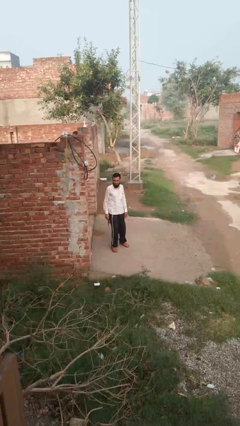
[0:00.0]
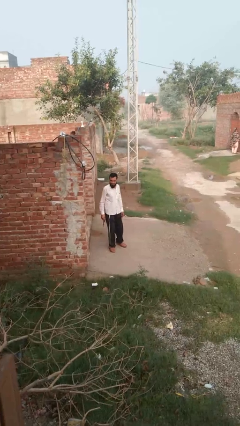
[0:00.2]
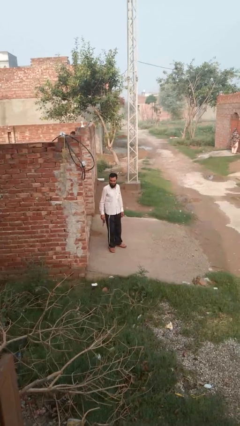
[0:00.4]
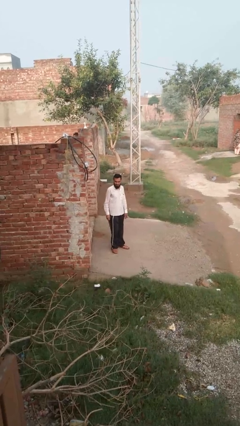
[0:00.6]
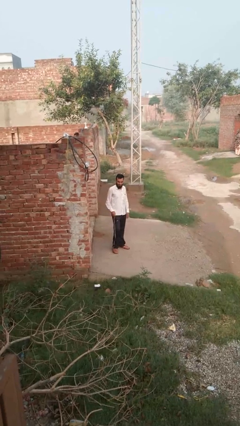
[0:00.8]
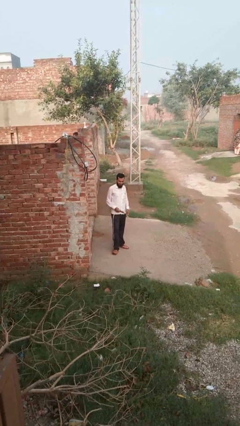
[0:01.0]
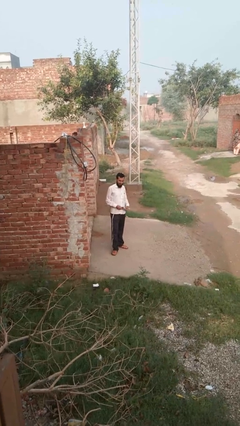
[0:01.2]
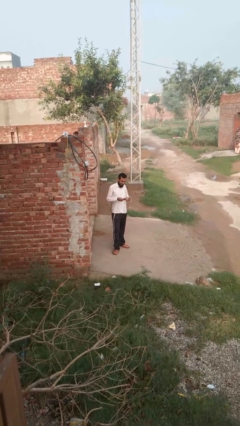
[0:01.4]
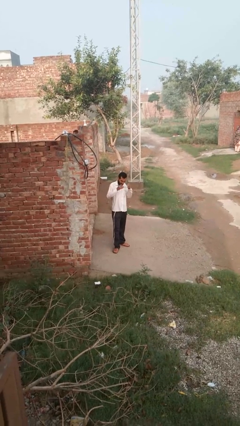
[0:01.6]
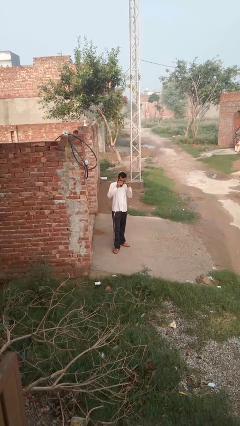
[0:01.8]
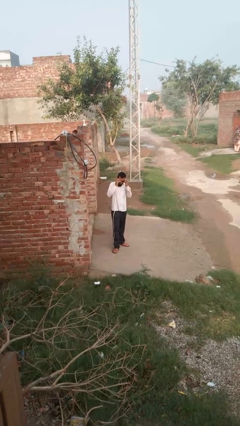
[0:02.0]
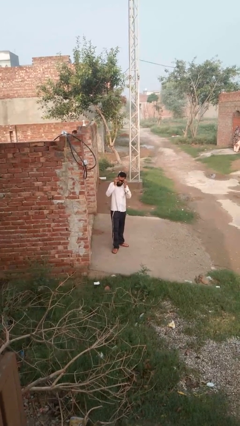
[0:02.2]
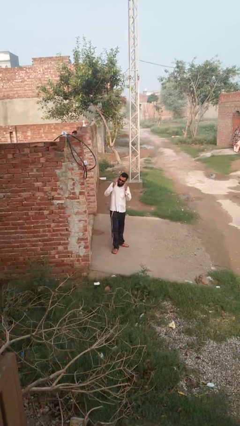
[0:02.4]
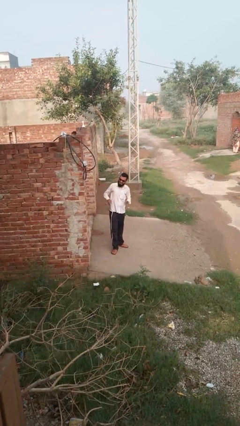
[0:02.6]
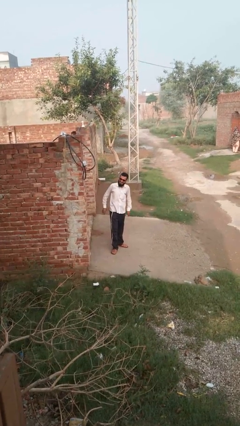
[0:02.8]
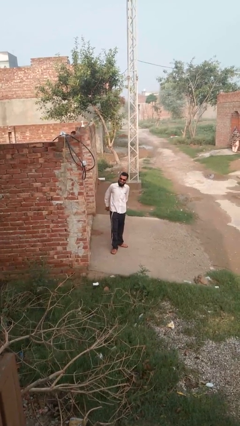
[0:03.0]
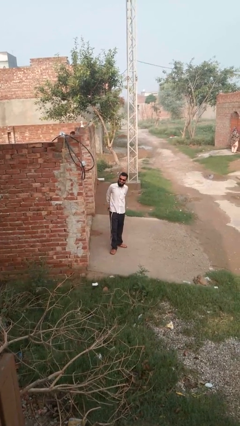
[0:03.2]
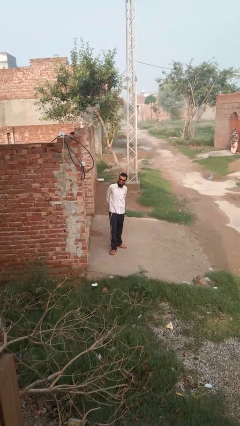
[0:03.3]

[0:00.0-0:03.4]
person puts on glasses

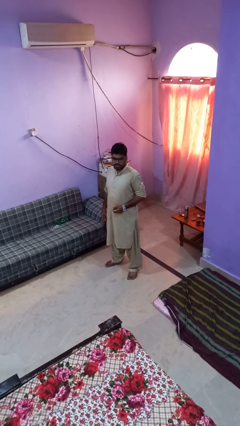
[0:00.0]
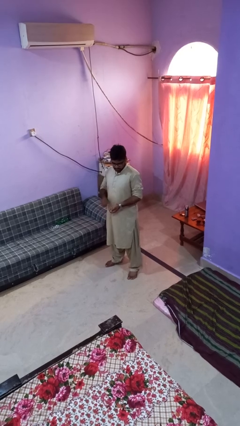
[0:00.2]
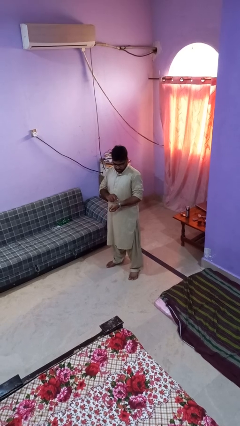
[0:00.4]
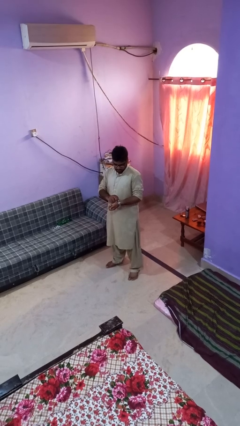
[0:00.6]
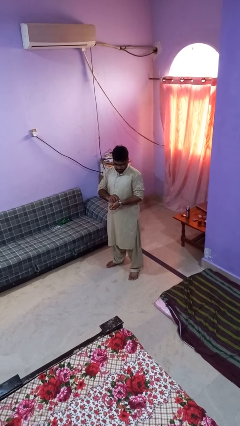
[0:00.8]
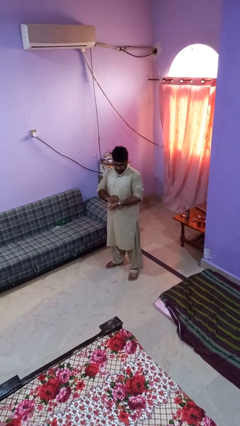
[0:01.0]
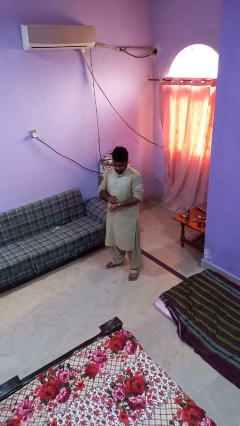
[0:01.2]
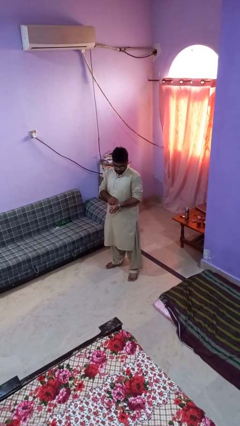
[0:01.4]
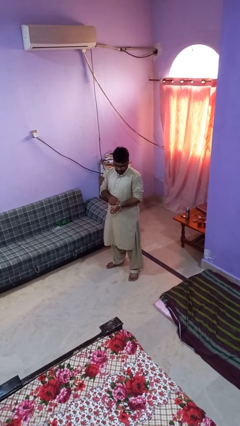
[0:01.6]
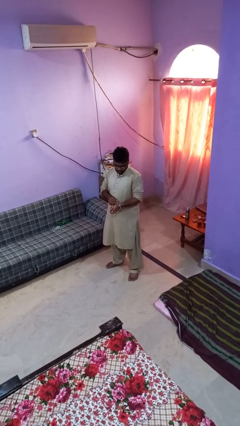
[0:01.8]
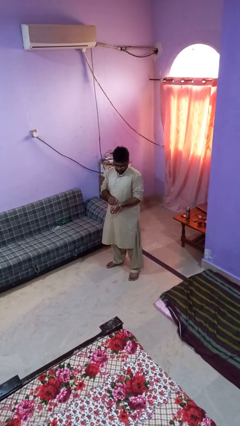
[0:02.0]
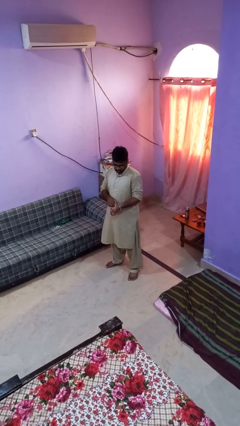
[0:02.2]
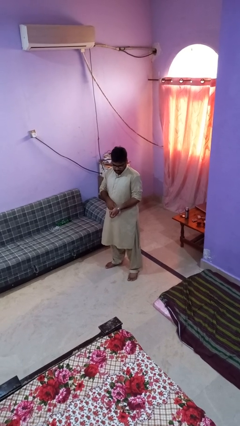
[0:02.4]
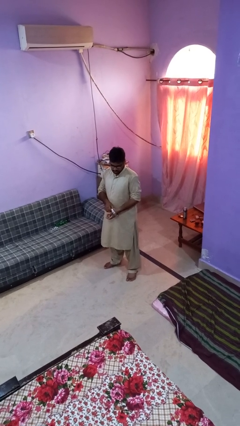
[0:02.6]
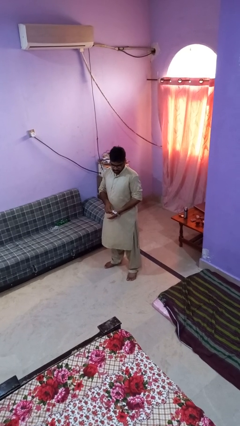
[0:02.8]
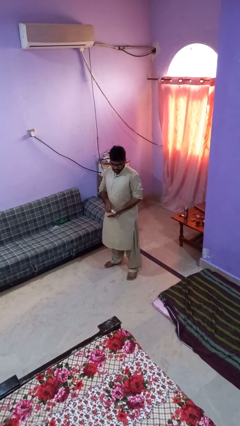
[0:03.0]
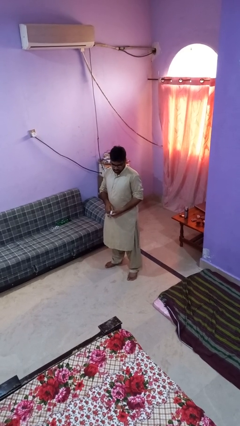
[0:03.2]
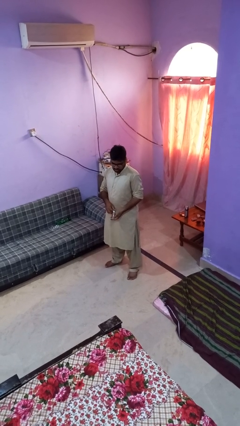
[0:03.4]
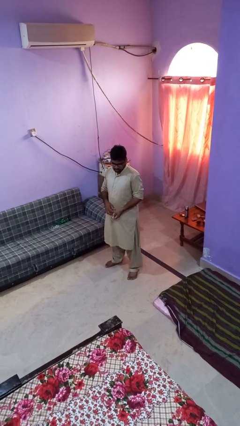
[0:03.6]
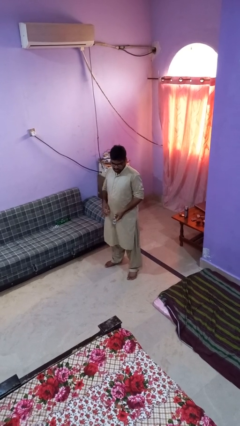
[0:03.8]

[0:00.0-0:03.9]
person takes off wristwatch

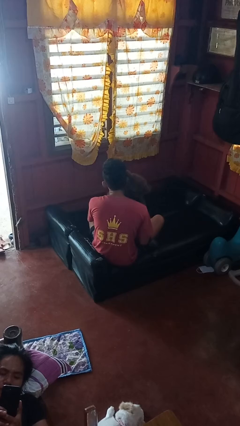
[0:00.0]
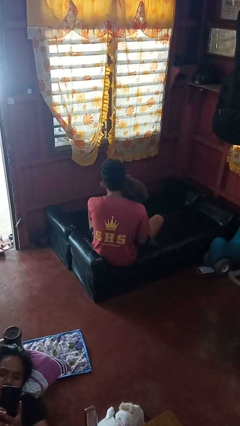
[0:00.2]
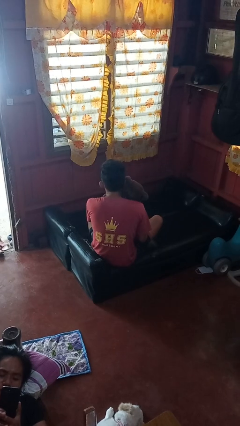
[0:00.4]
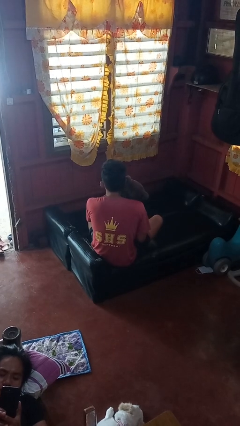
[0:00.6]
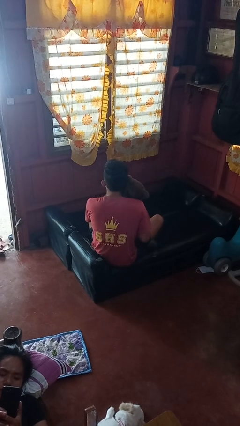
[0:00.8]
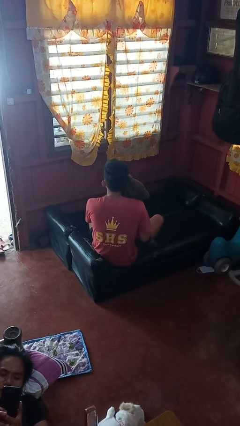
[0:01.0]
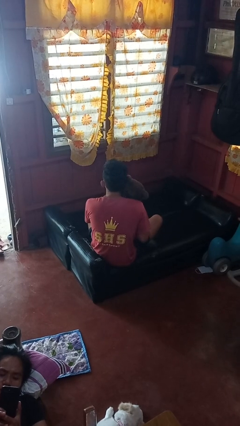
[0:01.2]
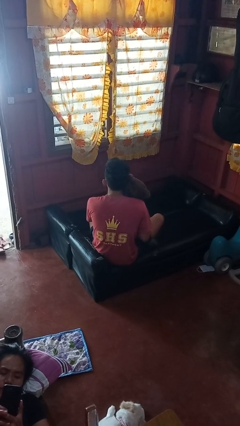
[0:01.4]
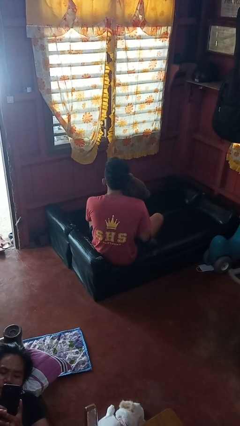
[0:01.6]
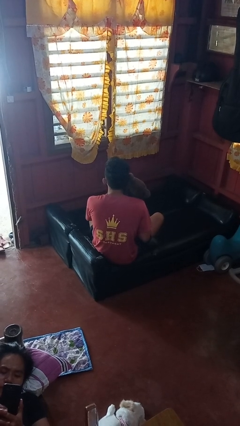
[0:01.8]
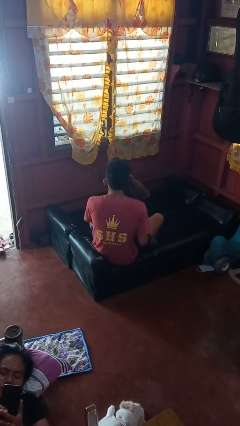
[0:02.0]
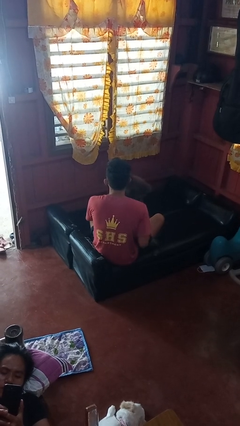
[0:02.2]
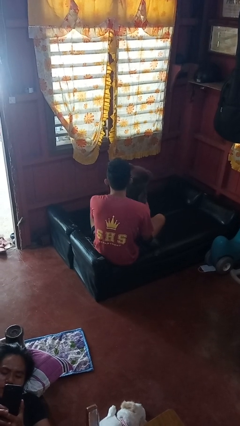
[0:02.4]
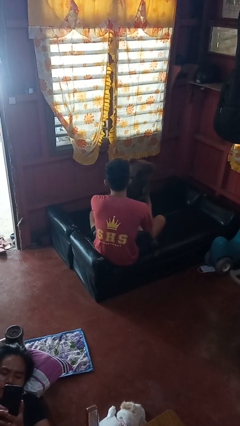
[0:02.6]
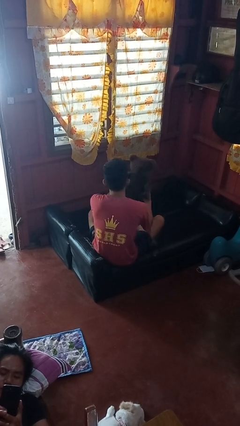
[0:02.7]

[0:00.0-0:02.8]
person hugs stuffed animal

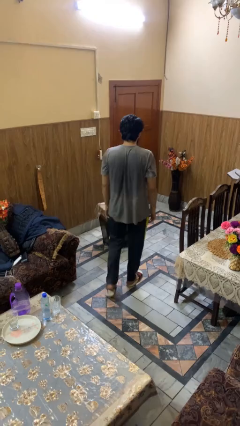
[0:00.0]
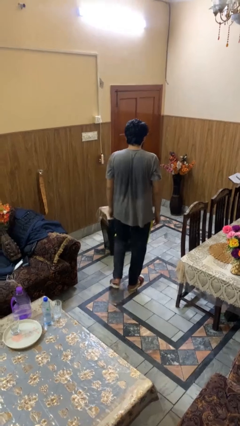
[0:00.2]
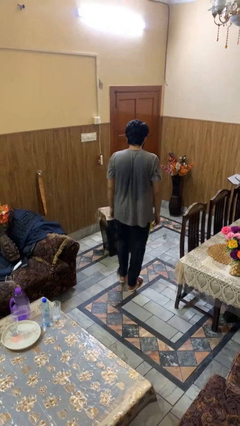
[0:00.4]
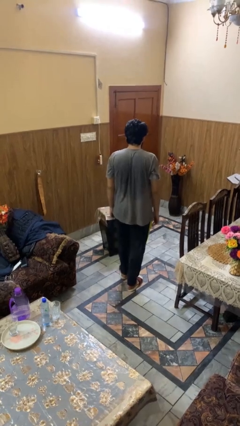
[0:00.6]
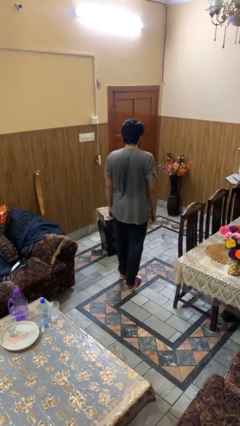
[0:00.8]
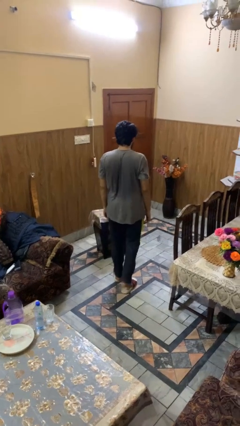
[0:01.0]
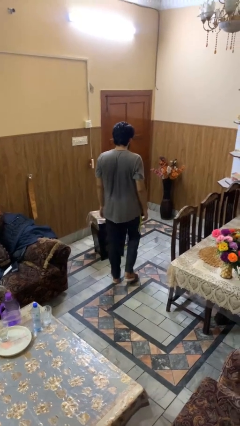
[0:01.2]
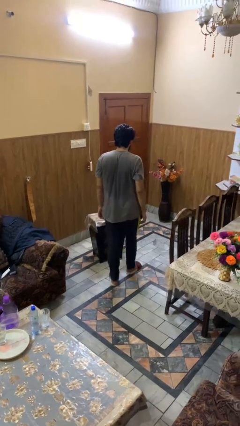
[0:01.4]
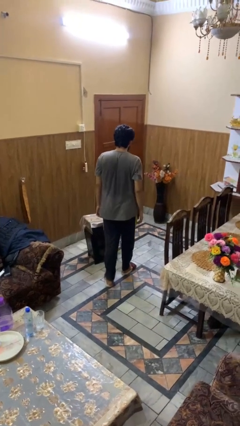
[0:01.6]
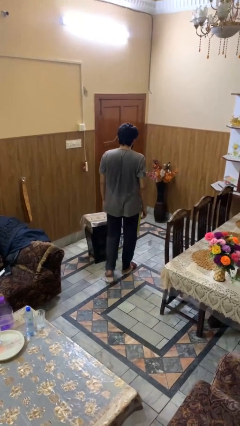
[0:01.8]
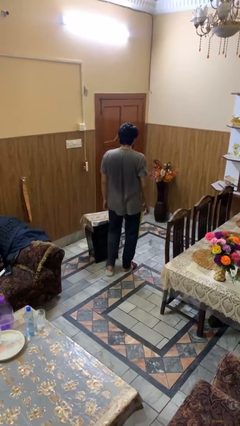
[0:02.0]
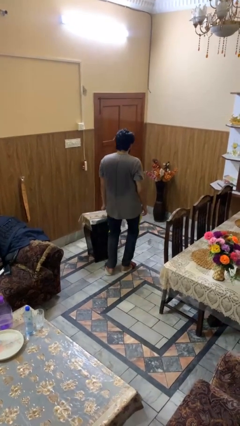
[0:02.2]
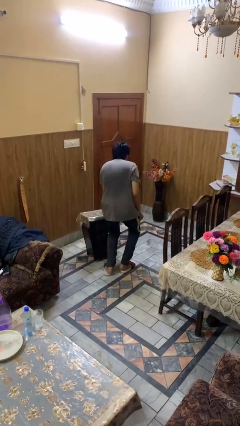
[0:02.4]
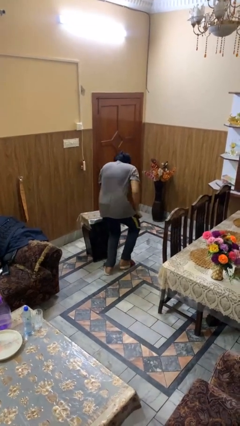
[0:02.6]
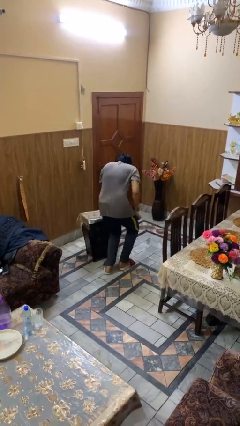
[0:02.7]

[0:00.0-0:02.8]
person trips on object on floor

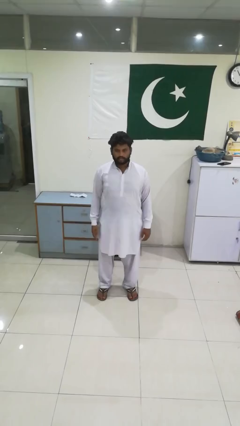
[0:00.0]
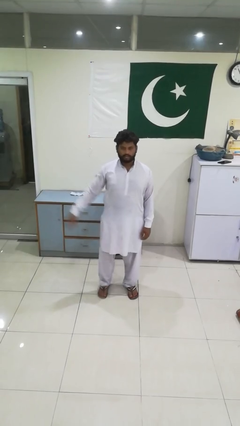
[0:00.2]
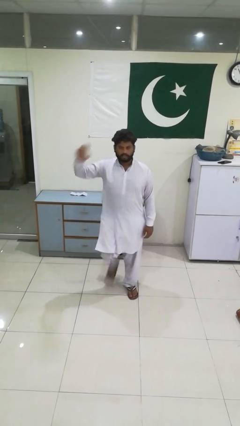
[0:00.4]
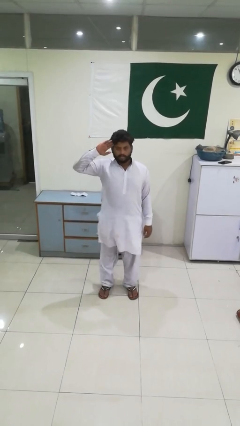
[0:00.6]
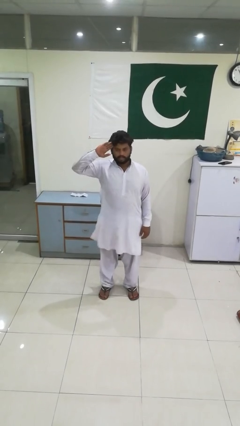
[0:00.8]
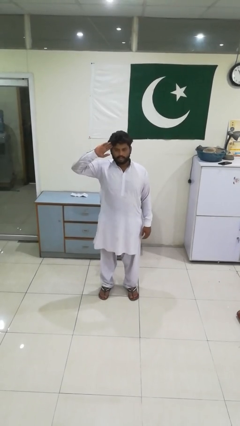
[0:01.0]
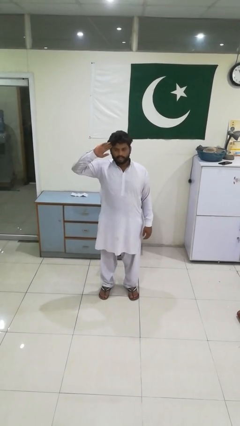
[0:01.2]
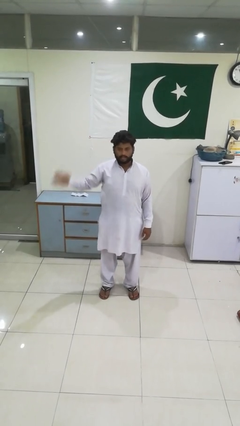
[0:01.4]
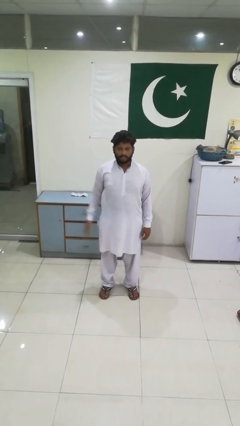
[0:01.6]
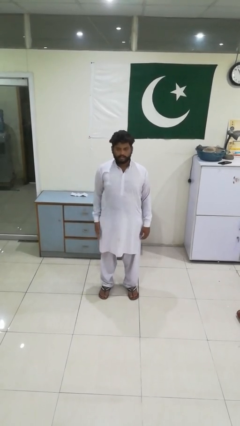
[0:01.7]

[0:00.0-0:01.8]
person salutes

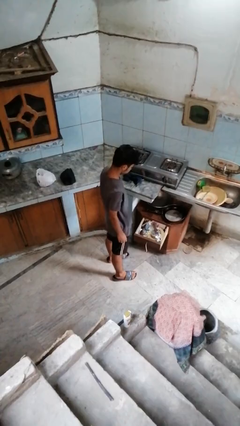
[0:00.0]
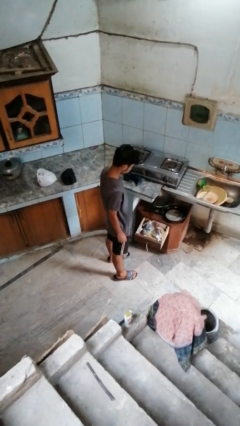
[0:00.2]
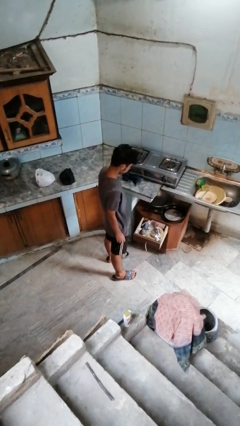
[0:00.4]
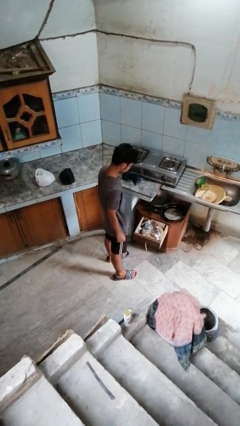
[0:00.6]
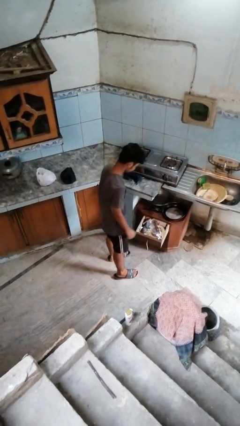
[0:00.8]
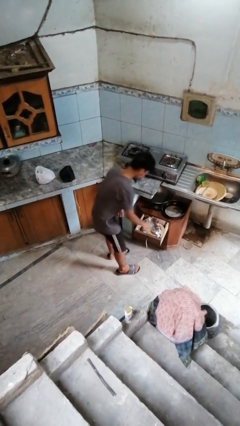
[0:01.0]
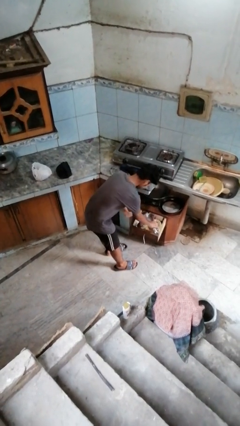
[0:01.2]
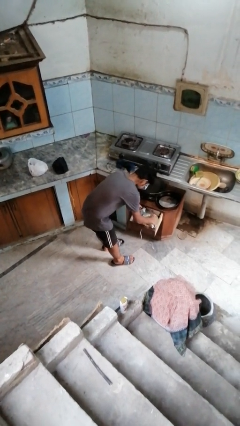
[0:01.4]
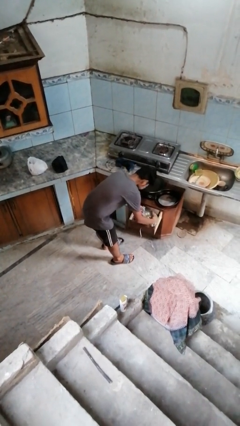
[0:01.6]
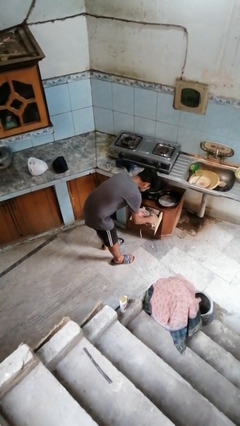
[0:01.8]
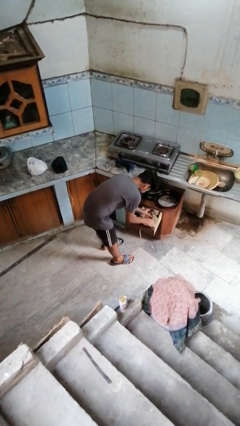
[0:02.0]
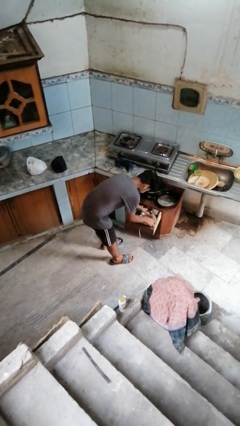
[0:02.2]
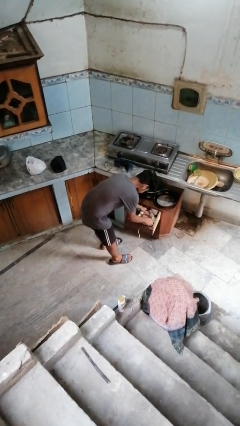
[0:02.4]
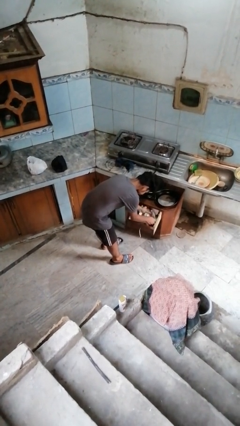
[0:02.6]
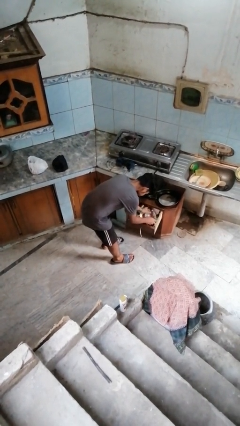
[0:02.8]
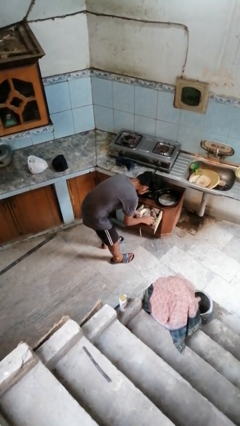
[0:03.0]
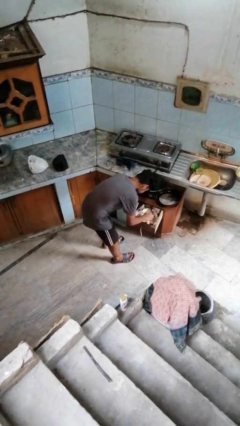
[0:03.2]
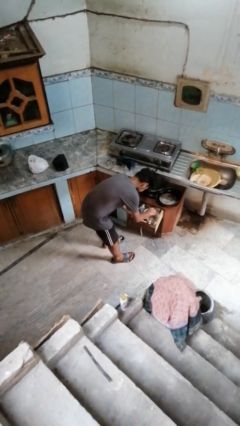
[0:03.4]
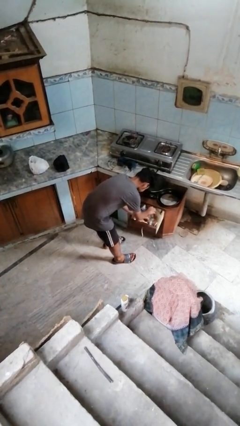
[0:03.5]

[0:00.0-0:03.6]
person searches in kitchen drawer
